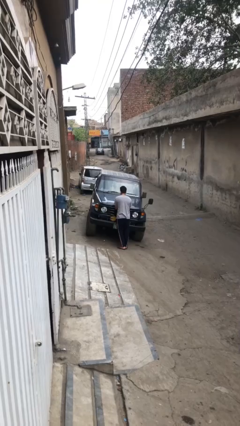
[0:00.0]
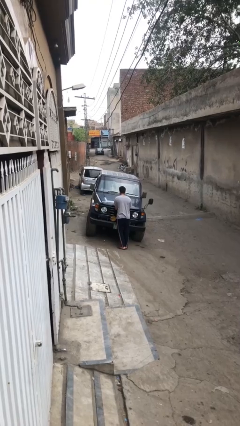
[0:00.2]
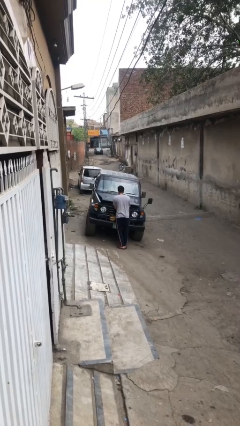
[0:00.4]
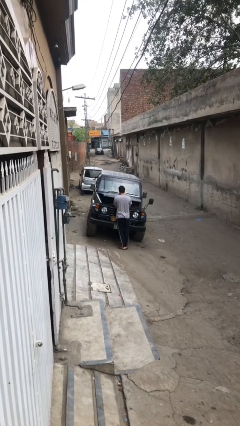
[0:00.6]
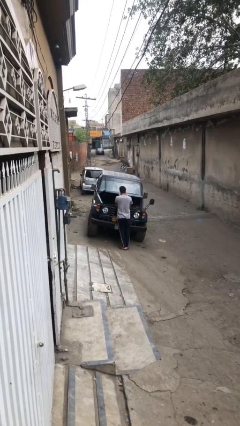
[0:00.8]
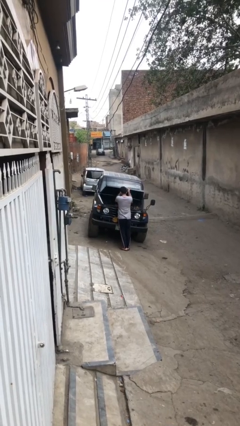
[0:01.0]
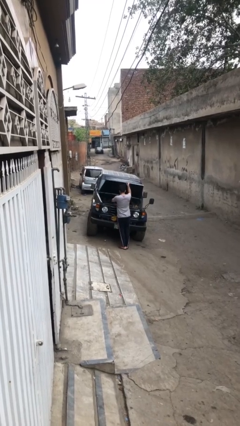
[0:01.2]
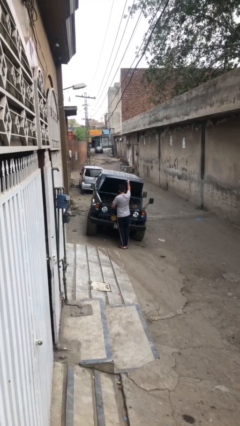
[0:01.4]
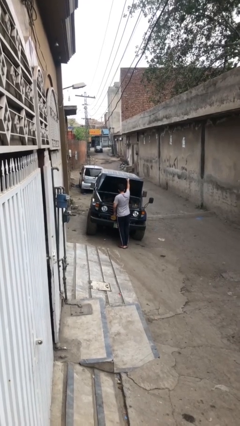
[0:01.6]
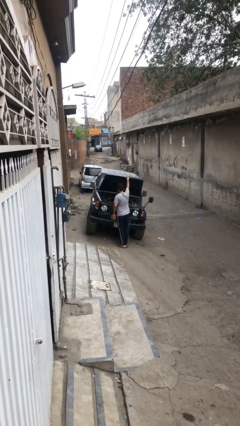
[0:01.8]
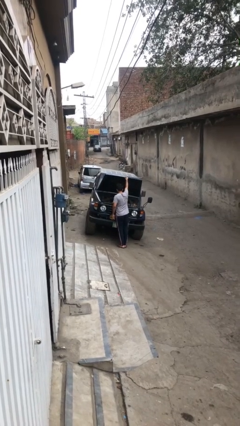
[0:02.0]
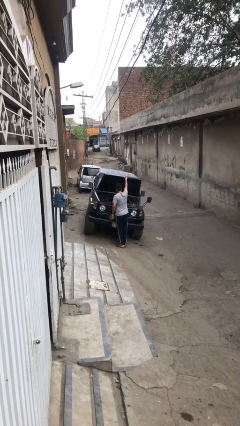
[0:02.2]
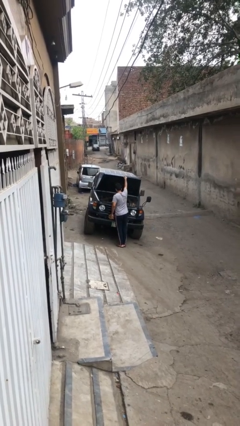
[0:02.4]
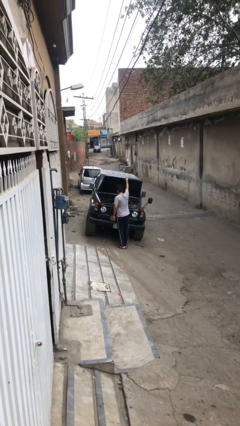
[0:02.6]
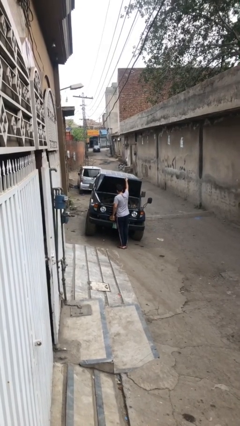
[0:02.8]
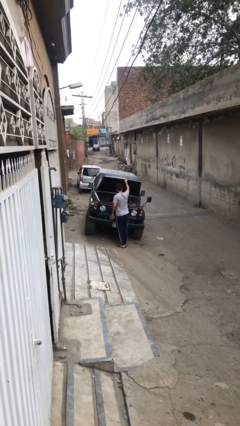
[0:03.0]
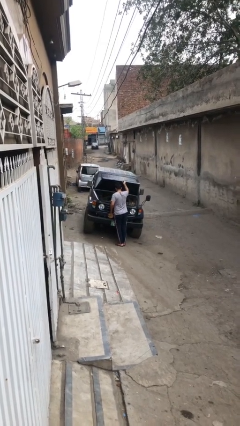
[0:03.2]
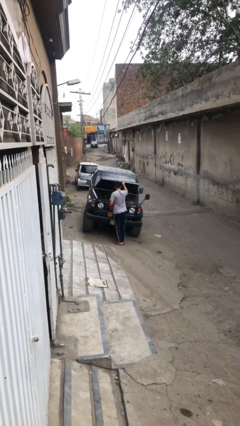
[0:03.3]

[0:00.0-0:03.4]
person opens car hood

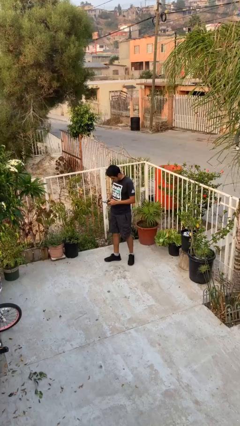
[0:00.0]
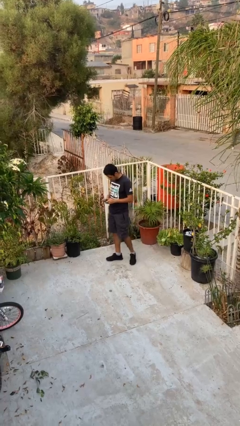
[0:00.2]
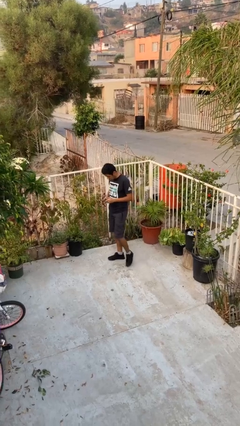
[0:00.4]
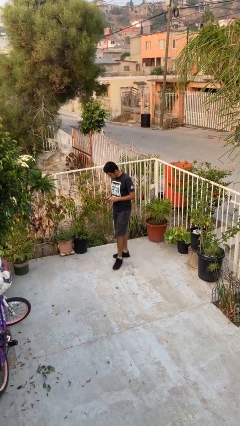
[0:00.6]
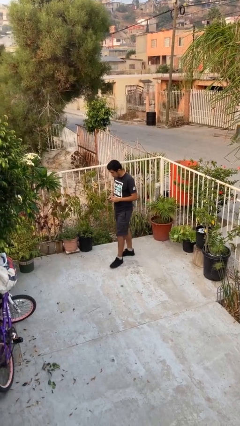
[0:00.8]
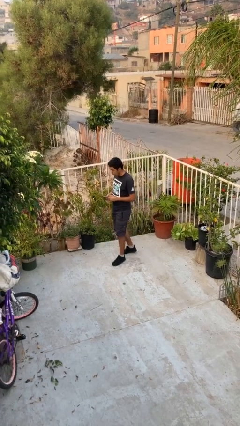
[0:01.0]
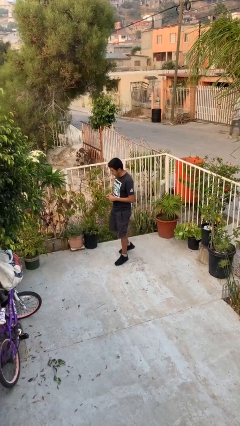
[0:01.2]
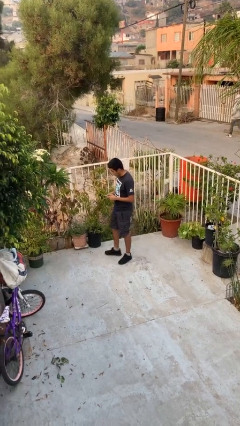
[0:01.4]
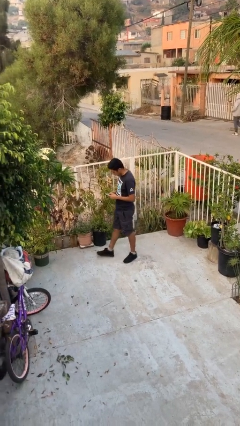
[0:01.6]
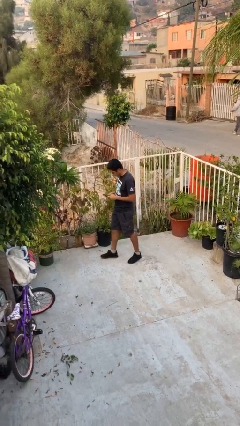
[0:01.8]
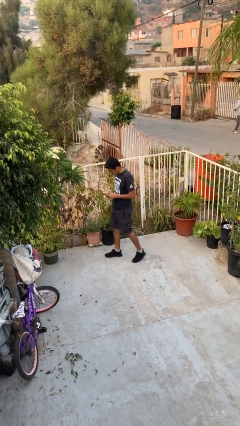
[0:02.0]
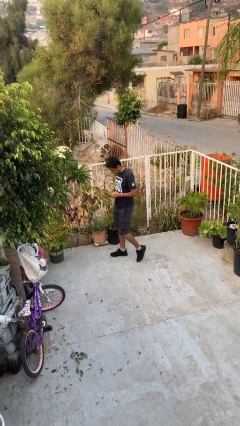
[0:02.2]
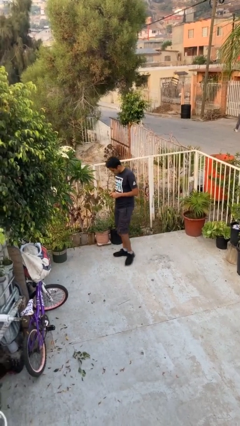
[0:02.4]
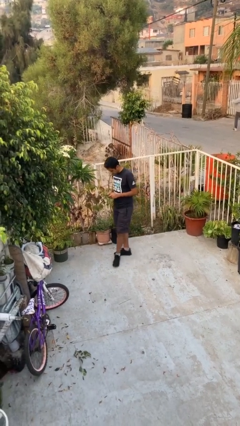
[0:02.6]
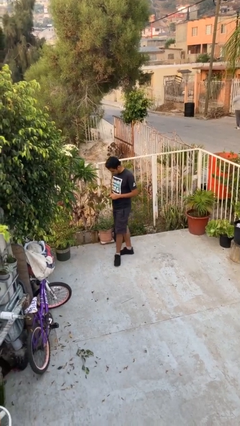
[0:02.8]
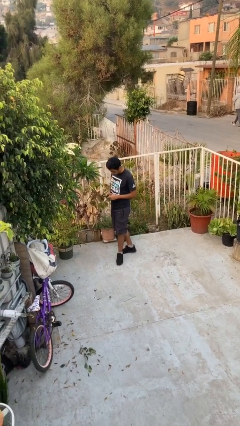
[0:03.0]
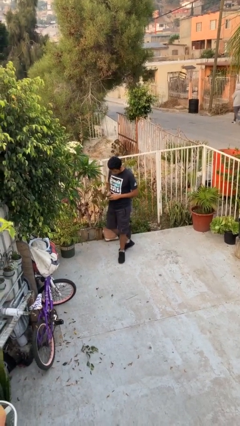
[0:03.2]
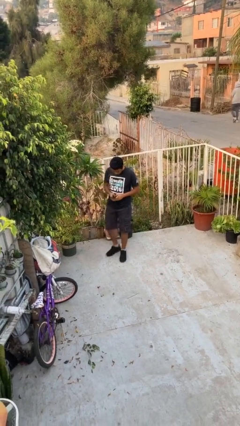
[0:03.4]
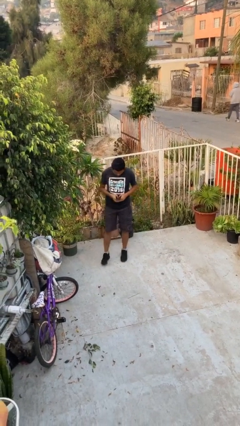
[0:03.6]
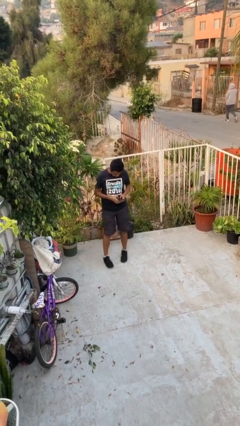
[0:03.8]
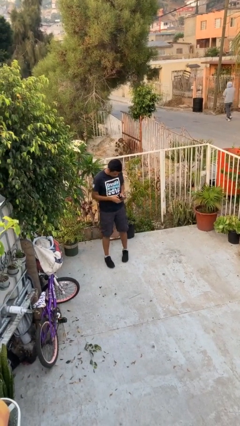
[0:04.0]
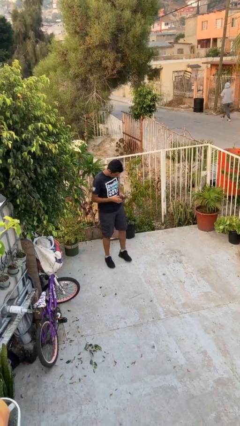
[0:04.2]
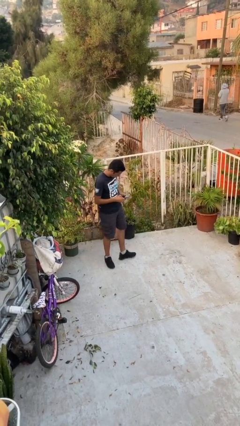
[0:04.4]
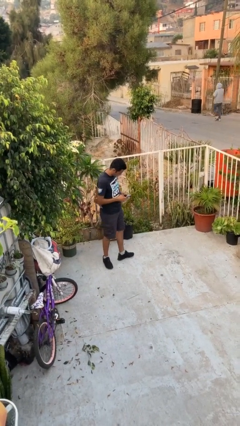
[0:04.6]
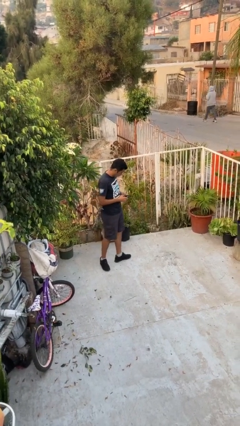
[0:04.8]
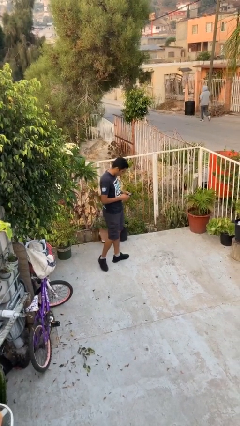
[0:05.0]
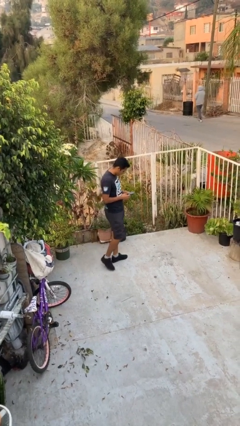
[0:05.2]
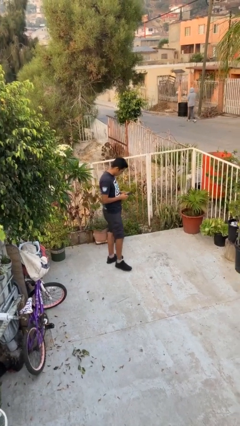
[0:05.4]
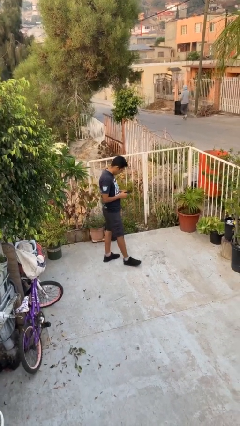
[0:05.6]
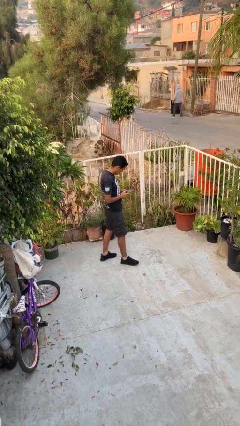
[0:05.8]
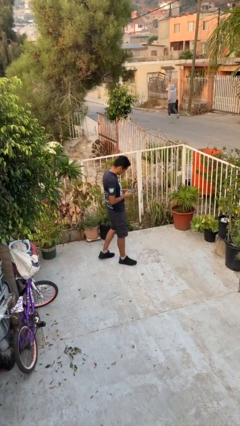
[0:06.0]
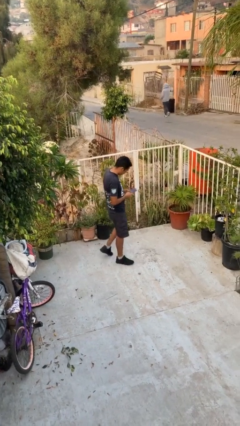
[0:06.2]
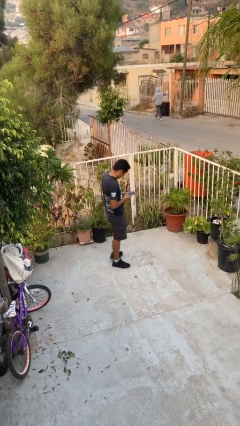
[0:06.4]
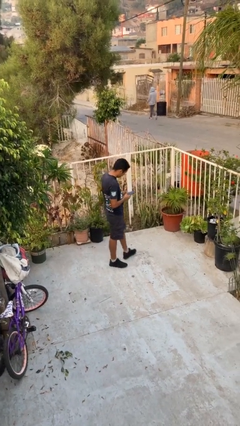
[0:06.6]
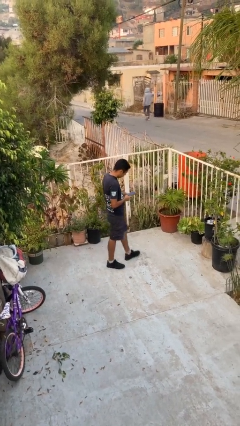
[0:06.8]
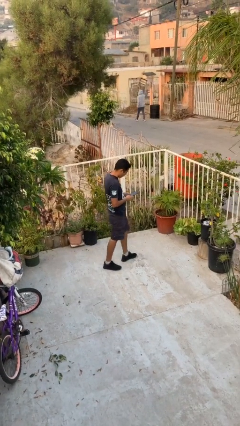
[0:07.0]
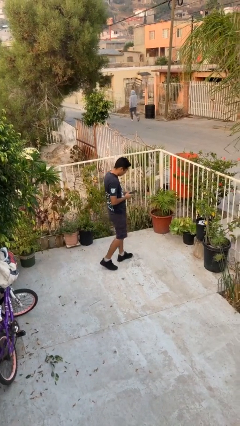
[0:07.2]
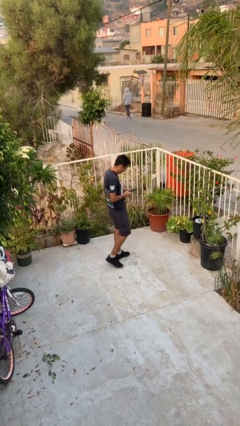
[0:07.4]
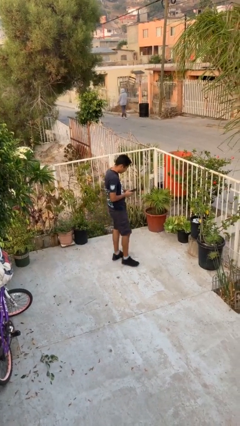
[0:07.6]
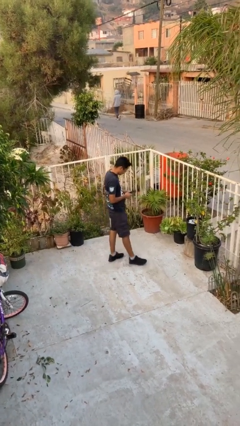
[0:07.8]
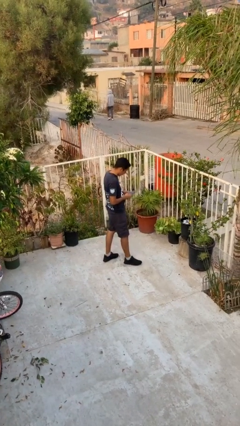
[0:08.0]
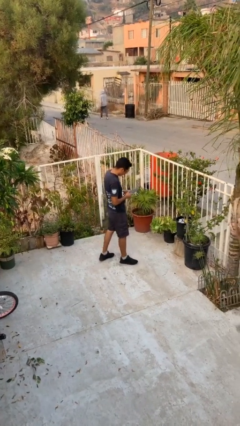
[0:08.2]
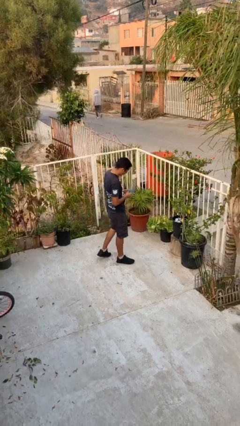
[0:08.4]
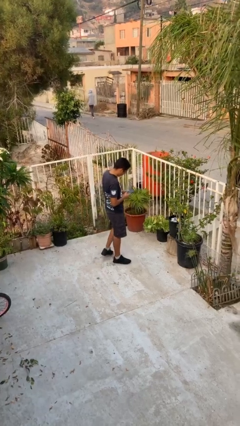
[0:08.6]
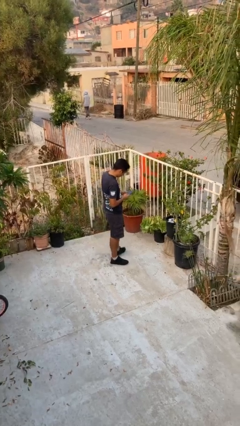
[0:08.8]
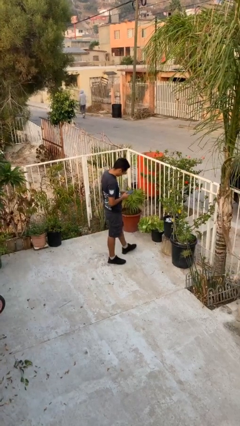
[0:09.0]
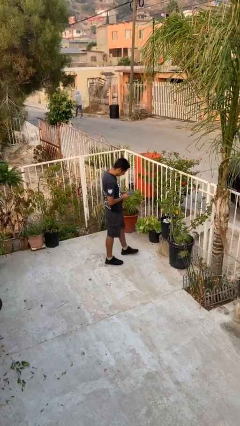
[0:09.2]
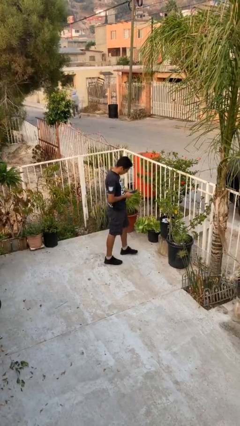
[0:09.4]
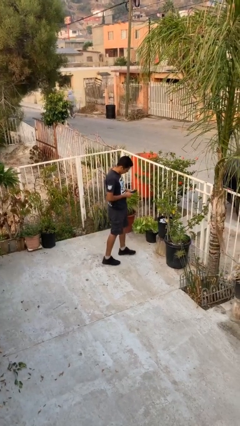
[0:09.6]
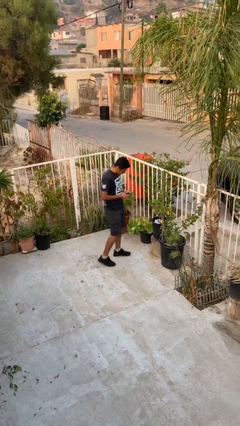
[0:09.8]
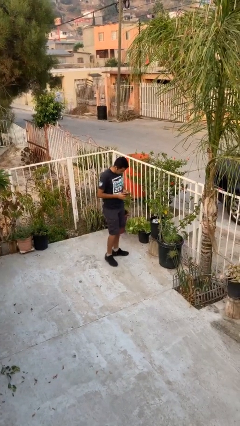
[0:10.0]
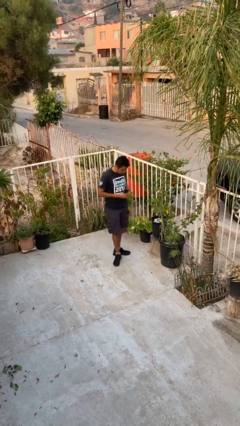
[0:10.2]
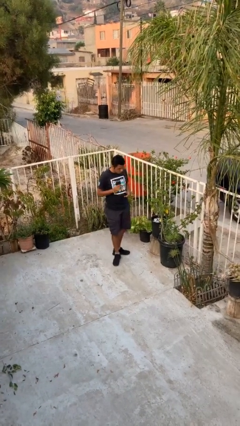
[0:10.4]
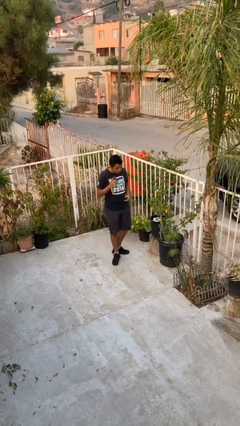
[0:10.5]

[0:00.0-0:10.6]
person texts on phone

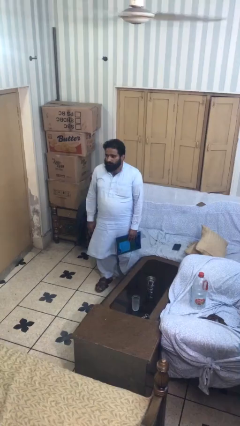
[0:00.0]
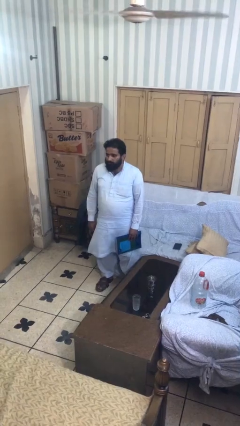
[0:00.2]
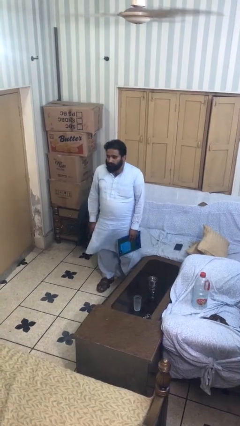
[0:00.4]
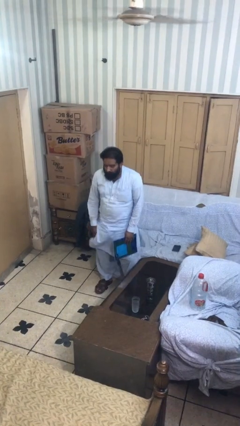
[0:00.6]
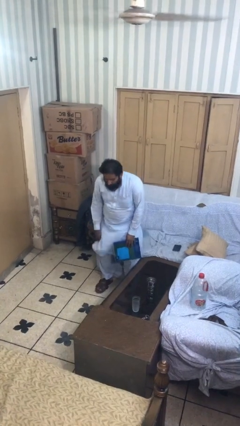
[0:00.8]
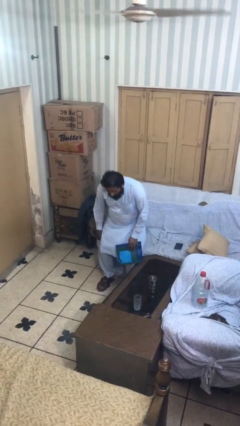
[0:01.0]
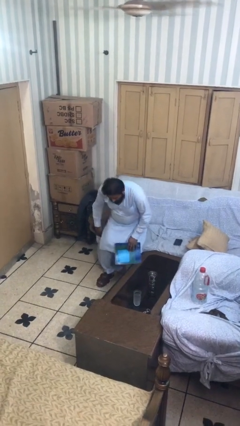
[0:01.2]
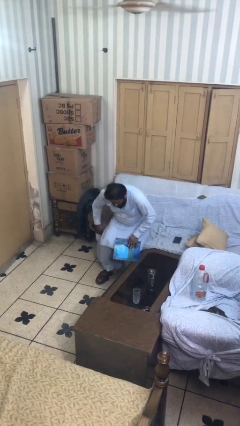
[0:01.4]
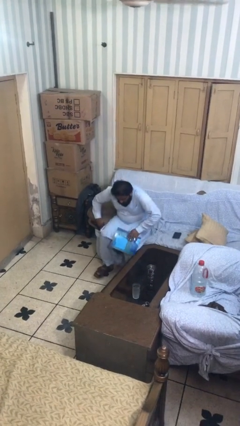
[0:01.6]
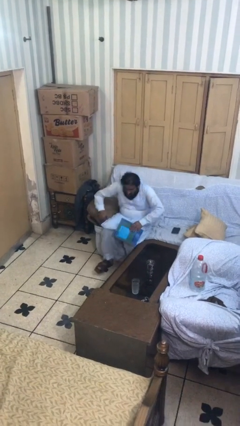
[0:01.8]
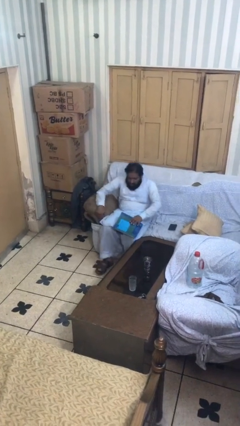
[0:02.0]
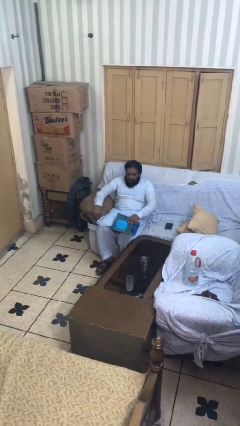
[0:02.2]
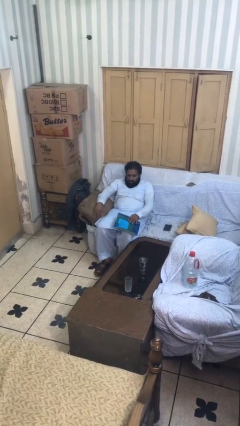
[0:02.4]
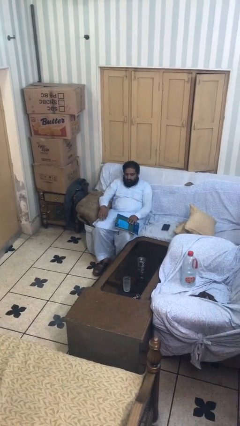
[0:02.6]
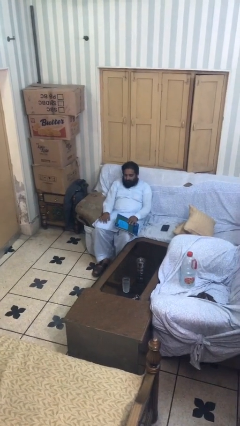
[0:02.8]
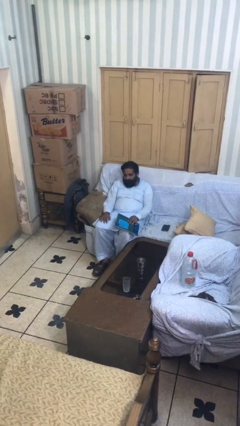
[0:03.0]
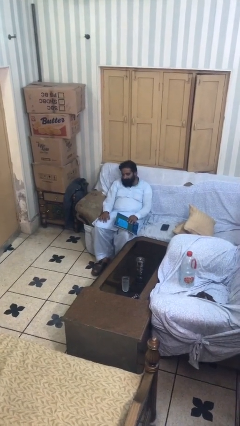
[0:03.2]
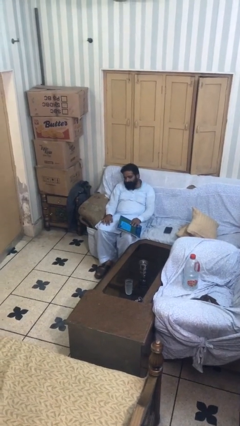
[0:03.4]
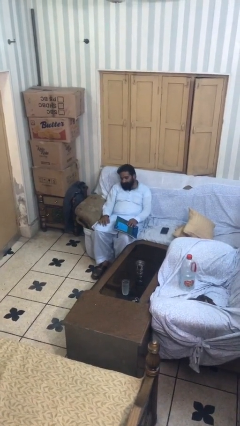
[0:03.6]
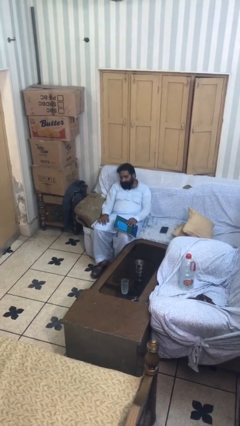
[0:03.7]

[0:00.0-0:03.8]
person sits down

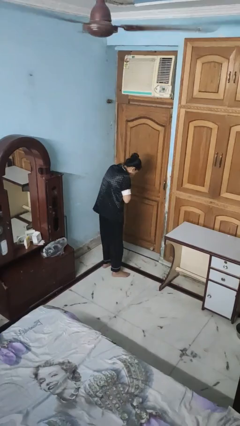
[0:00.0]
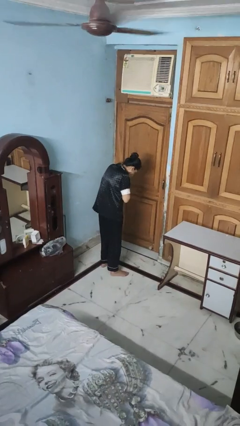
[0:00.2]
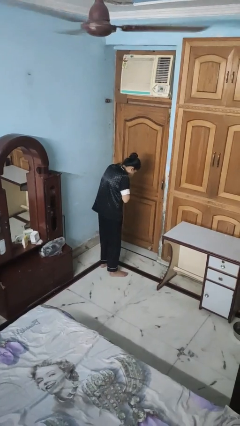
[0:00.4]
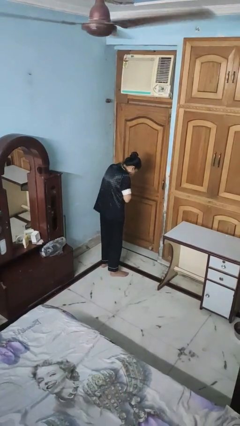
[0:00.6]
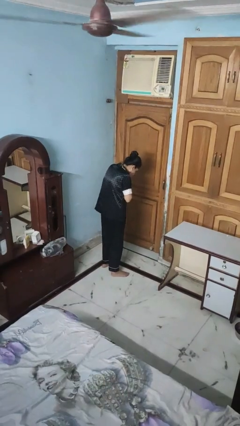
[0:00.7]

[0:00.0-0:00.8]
person sneezes into hand
